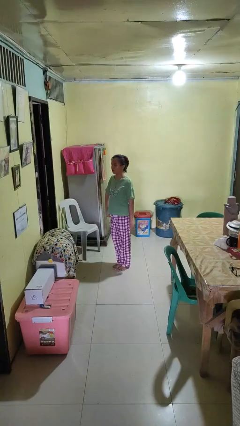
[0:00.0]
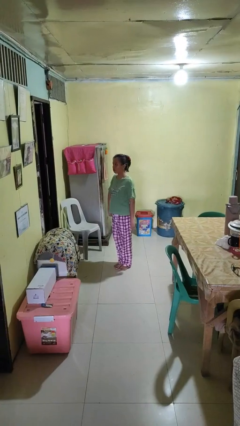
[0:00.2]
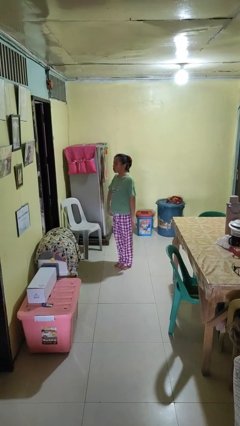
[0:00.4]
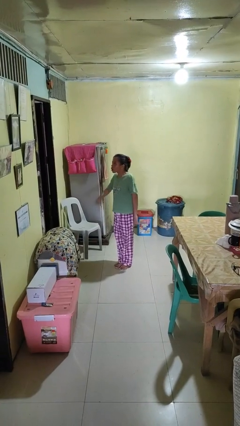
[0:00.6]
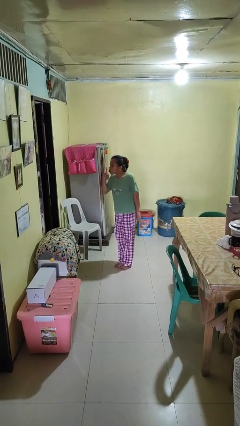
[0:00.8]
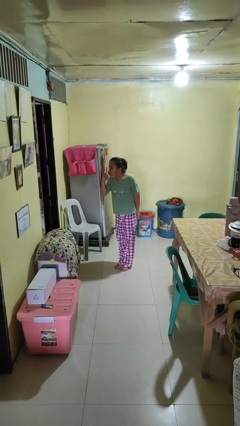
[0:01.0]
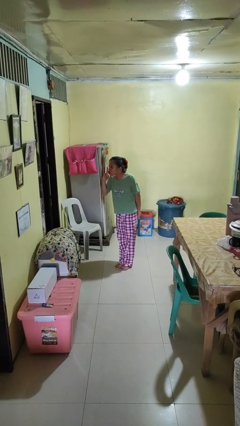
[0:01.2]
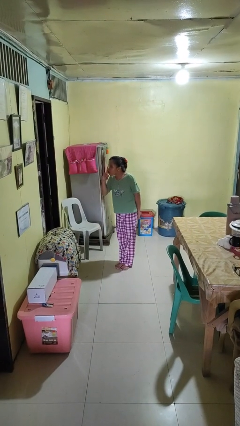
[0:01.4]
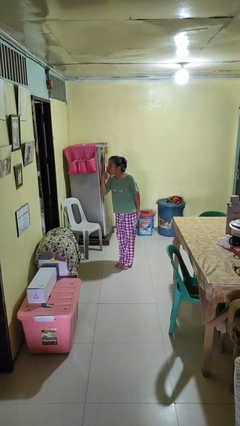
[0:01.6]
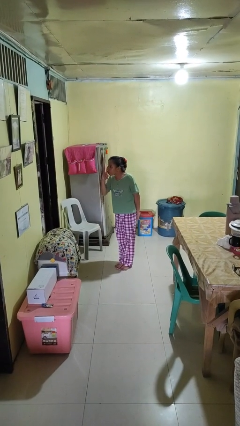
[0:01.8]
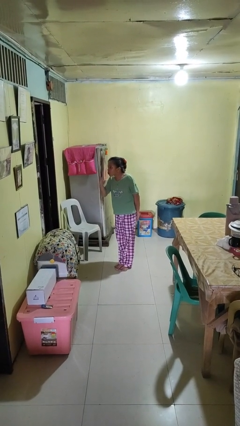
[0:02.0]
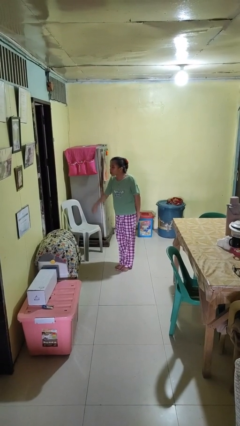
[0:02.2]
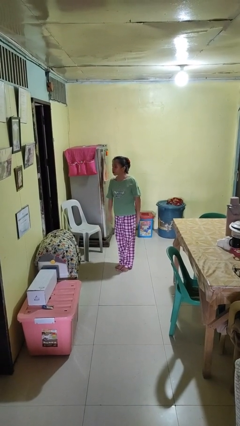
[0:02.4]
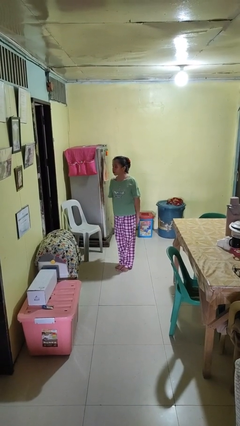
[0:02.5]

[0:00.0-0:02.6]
person gestures be quiet

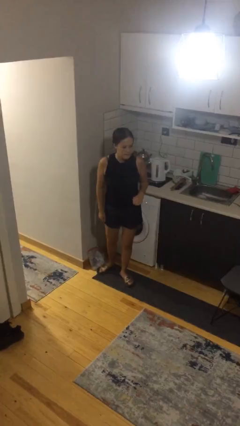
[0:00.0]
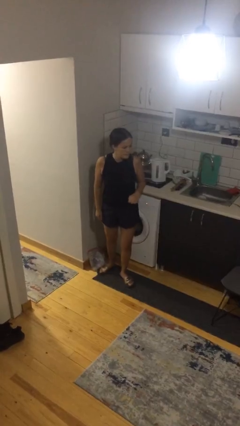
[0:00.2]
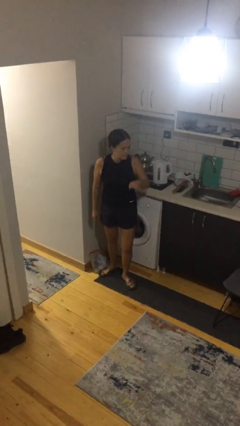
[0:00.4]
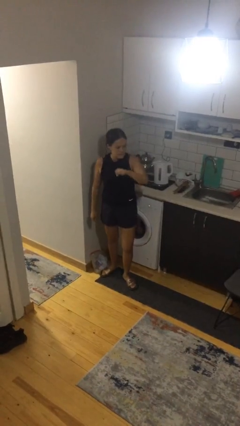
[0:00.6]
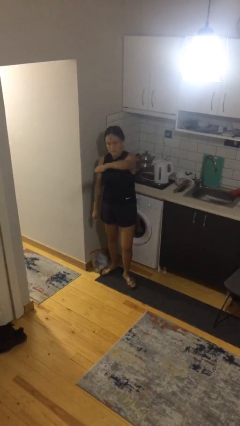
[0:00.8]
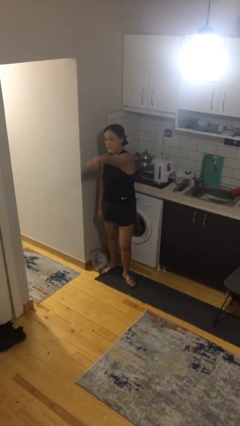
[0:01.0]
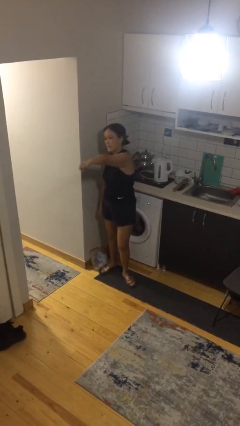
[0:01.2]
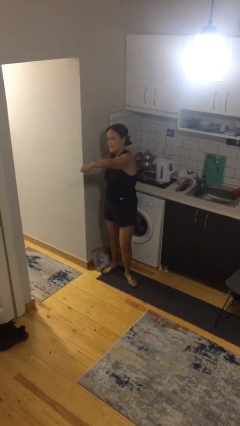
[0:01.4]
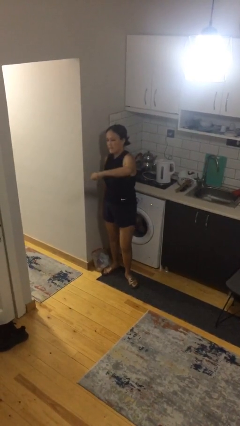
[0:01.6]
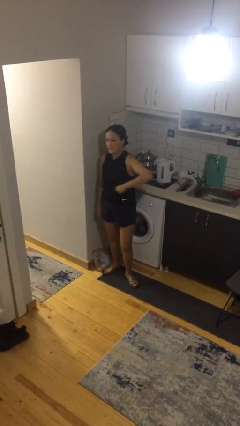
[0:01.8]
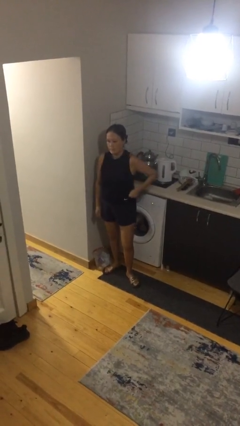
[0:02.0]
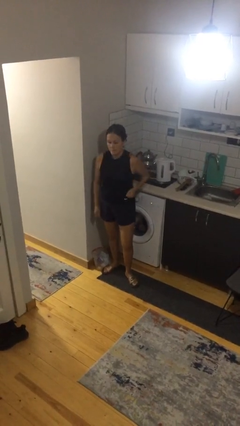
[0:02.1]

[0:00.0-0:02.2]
person punches

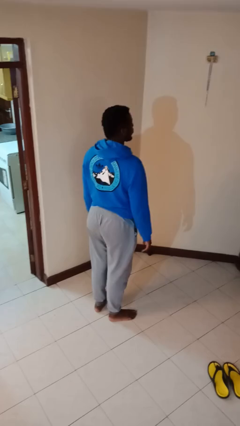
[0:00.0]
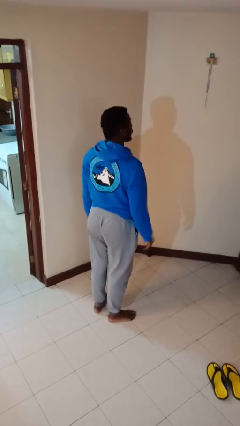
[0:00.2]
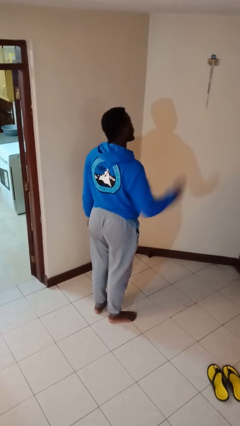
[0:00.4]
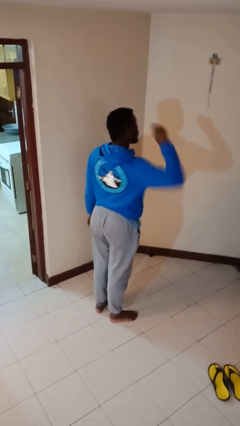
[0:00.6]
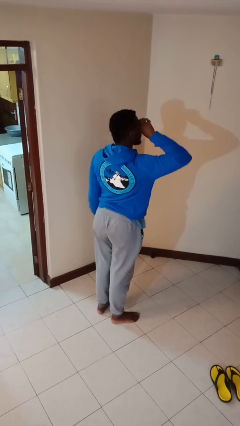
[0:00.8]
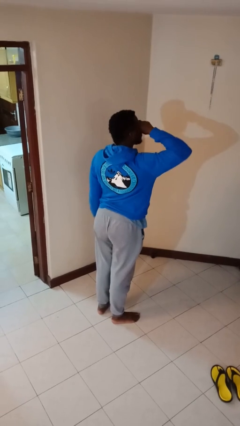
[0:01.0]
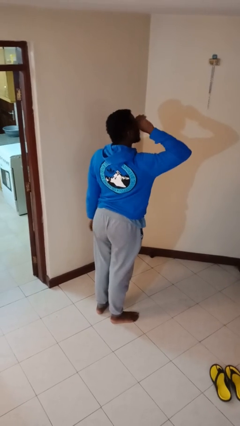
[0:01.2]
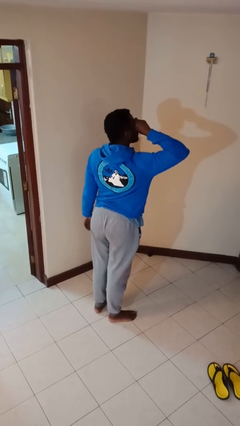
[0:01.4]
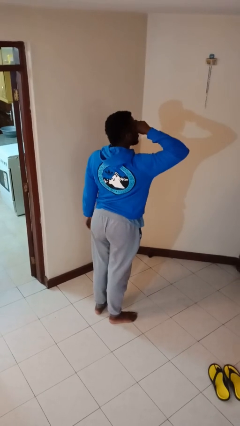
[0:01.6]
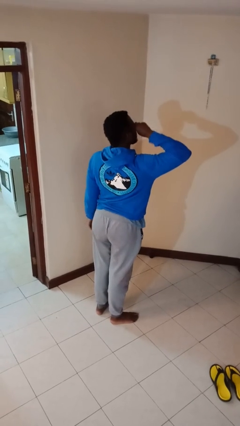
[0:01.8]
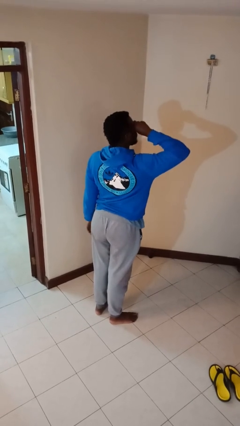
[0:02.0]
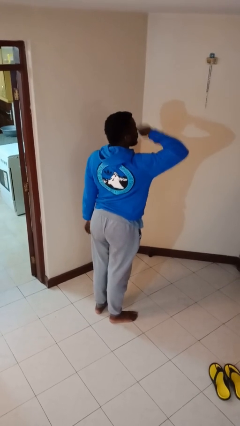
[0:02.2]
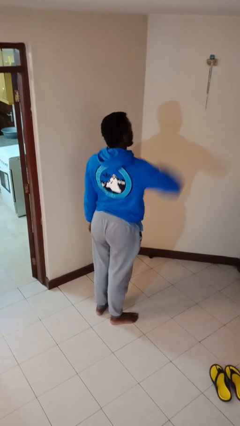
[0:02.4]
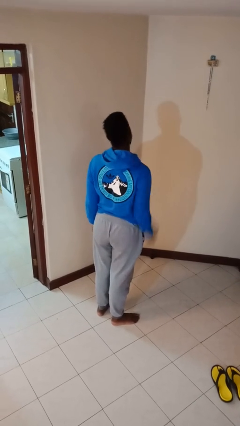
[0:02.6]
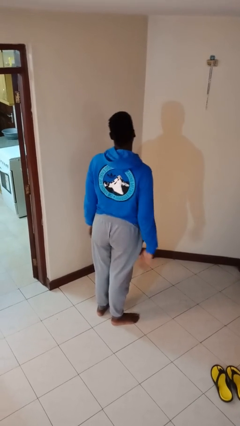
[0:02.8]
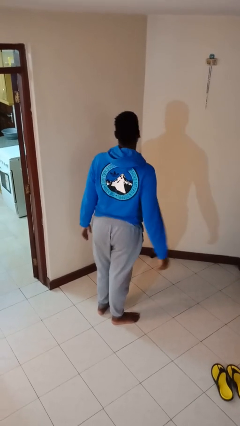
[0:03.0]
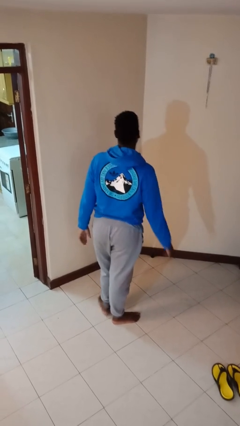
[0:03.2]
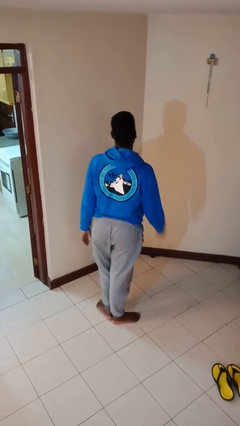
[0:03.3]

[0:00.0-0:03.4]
person rubs eyes

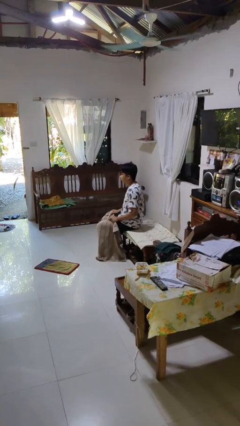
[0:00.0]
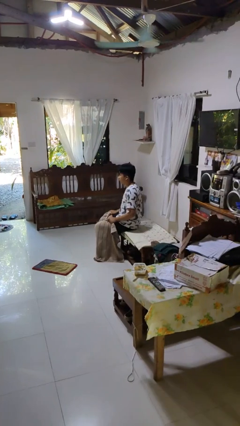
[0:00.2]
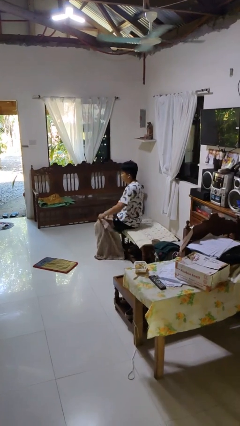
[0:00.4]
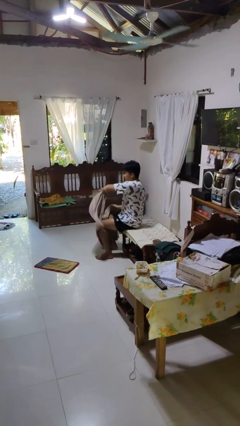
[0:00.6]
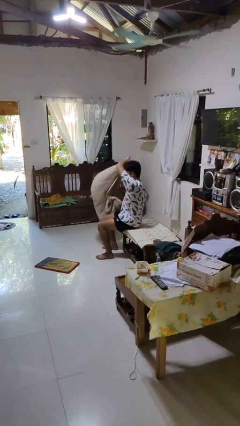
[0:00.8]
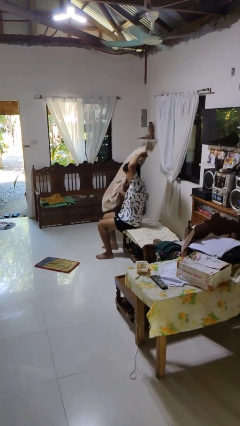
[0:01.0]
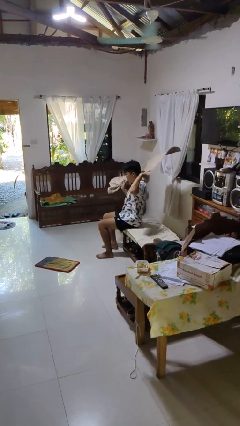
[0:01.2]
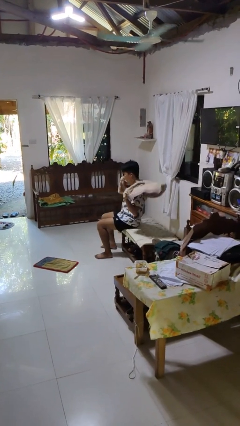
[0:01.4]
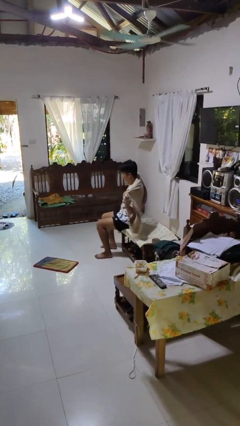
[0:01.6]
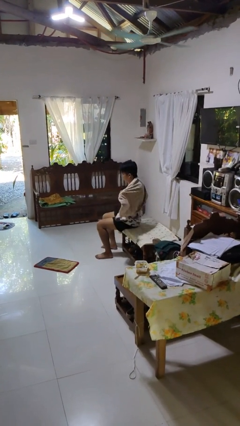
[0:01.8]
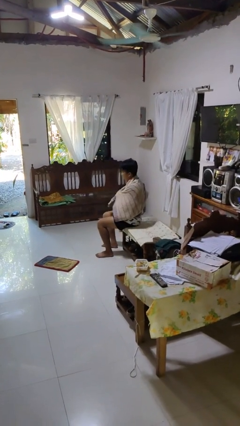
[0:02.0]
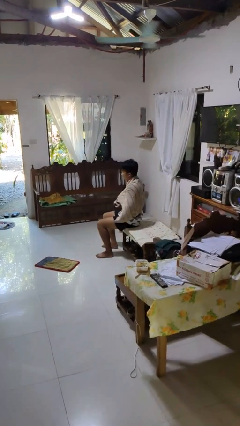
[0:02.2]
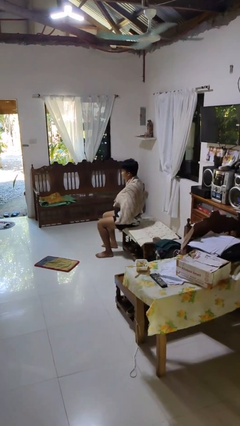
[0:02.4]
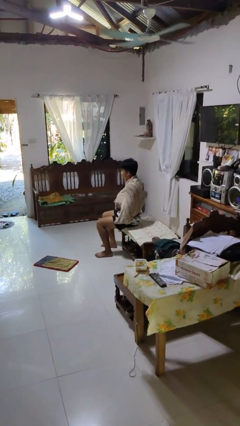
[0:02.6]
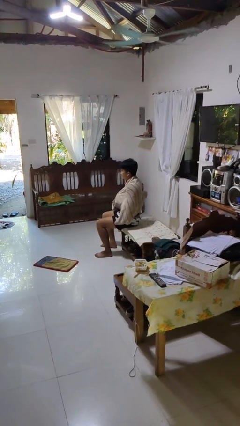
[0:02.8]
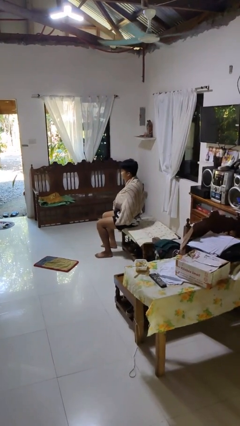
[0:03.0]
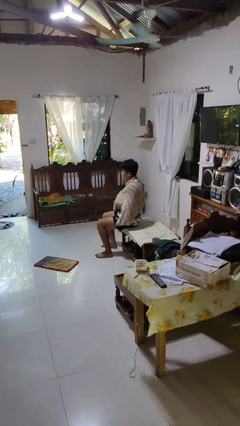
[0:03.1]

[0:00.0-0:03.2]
person covers with blanket

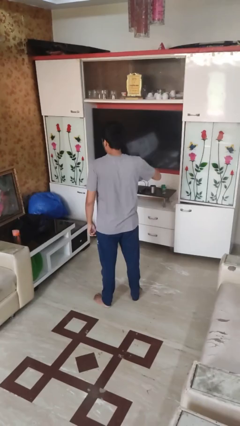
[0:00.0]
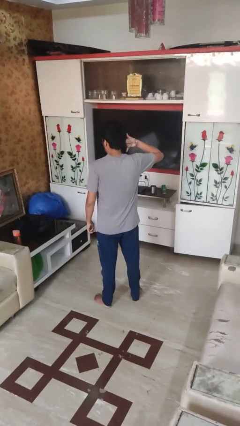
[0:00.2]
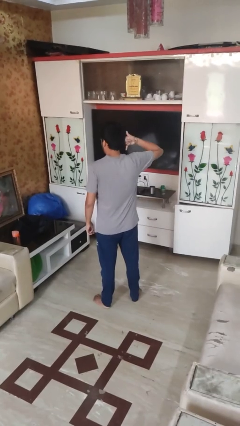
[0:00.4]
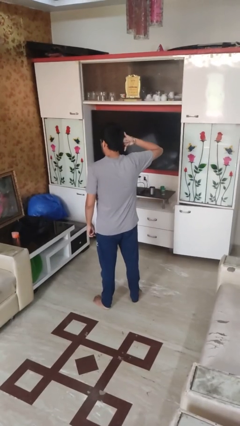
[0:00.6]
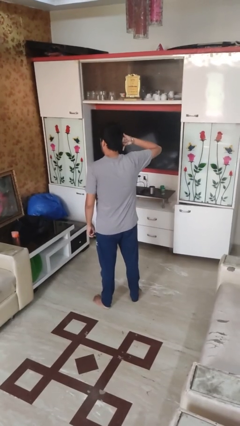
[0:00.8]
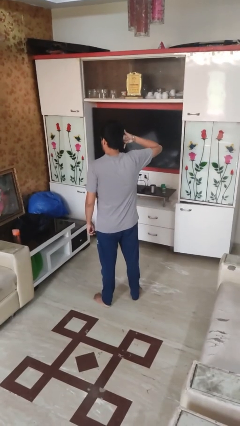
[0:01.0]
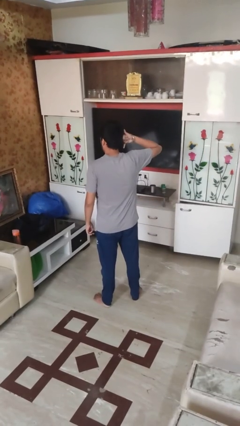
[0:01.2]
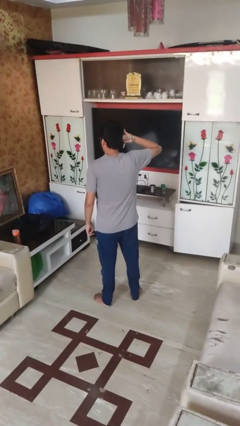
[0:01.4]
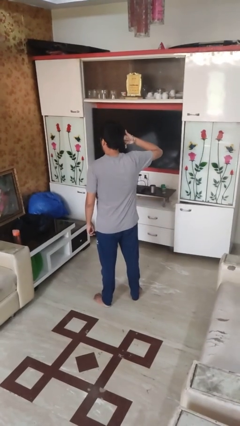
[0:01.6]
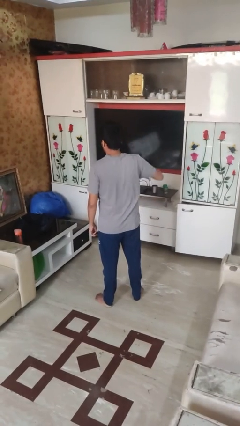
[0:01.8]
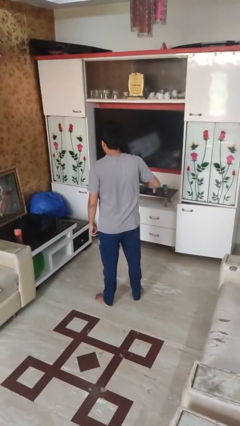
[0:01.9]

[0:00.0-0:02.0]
person gestures call me

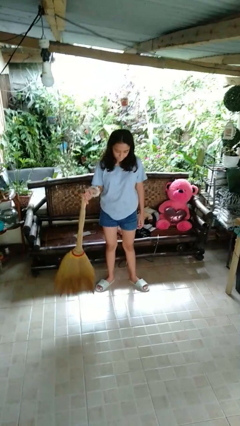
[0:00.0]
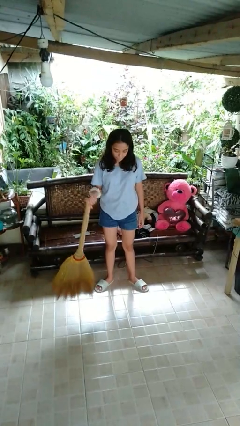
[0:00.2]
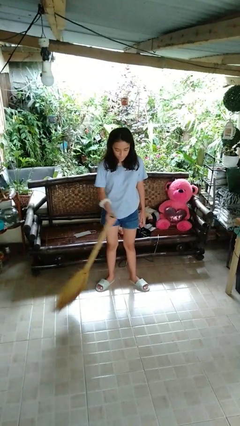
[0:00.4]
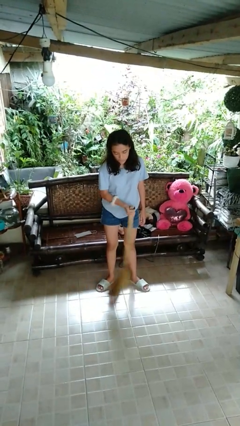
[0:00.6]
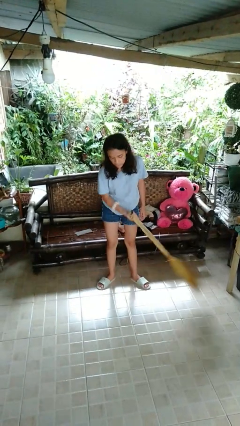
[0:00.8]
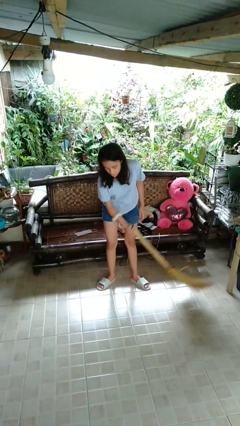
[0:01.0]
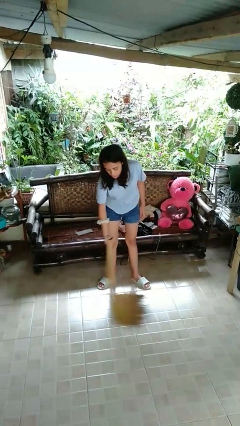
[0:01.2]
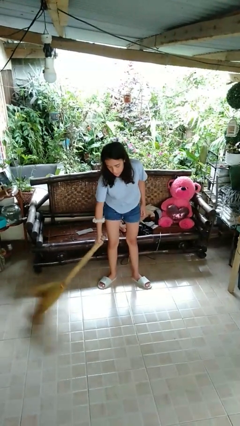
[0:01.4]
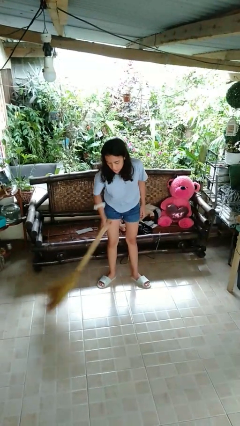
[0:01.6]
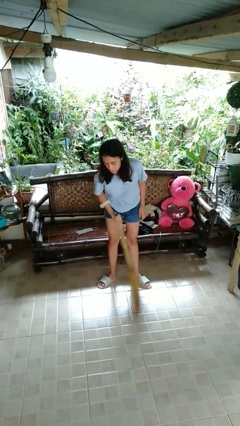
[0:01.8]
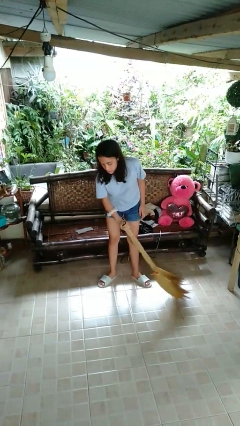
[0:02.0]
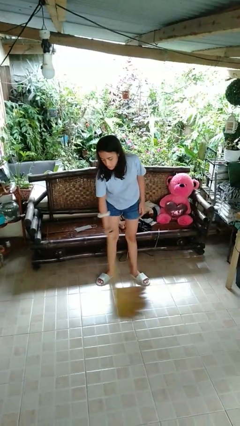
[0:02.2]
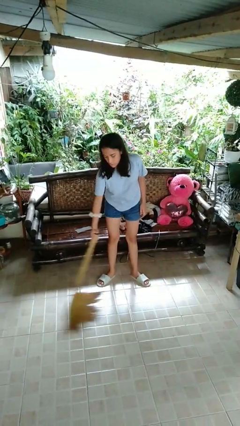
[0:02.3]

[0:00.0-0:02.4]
person sweeps floor

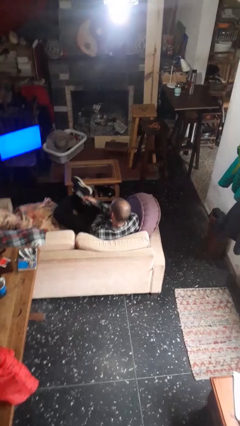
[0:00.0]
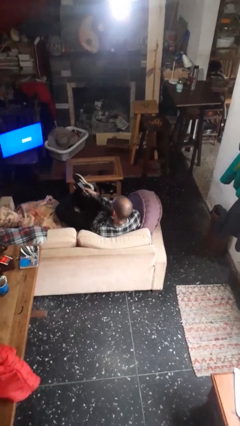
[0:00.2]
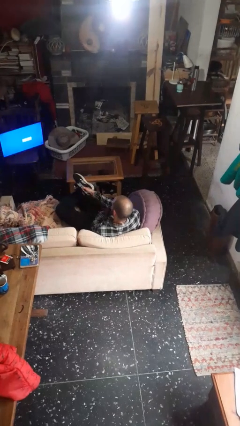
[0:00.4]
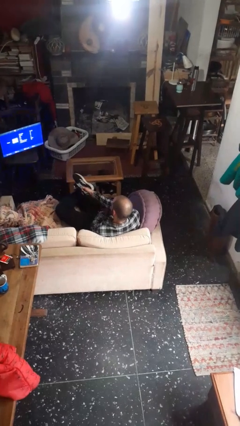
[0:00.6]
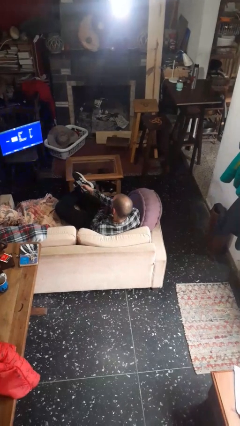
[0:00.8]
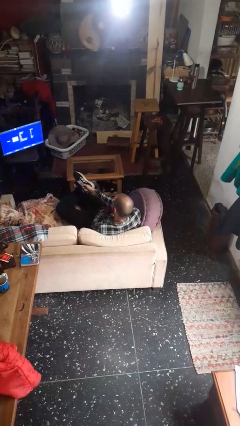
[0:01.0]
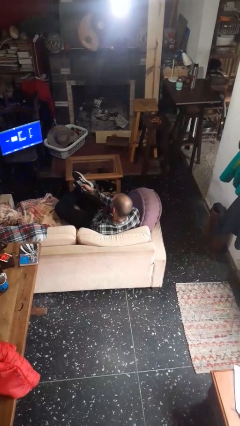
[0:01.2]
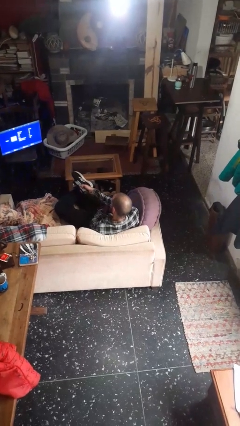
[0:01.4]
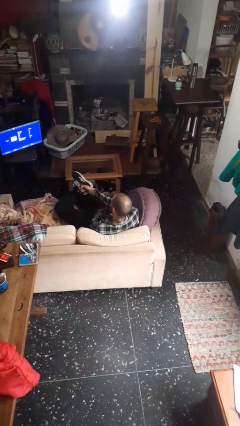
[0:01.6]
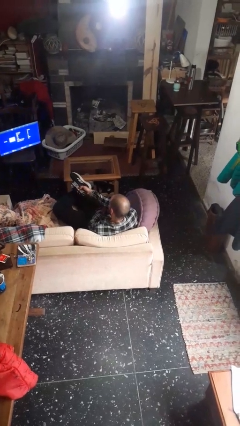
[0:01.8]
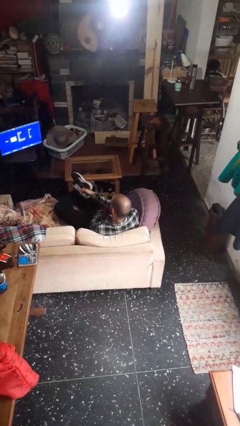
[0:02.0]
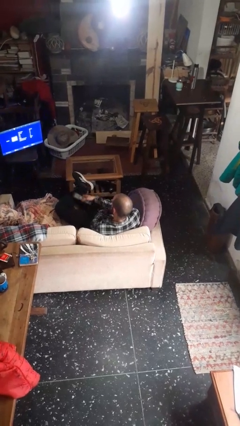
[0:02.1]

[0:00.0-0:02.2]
person uses television remote
